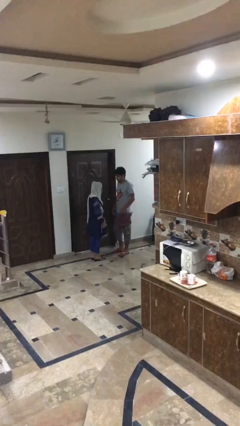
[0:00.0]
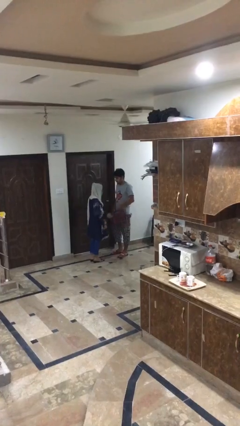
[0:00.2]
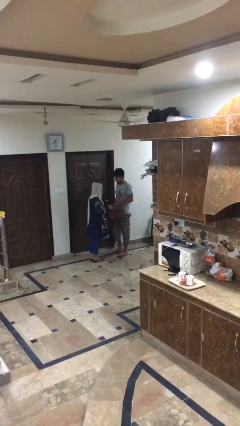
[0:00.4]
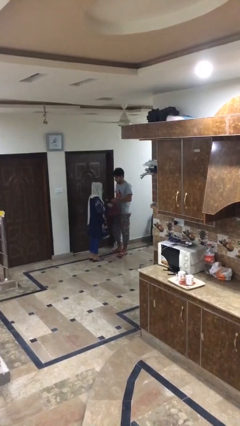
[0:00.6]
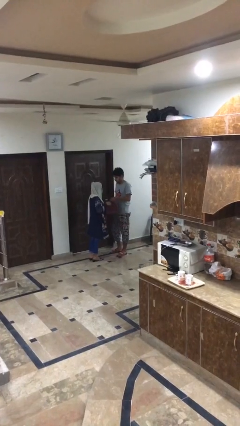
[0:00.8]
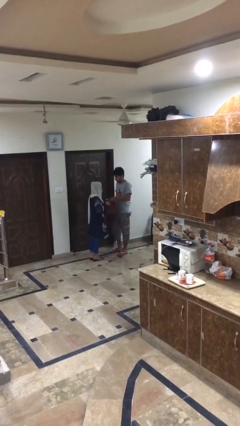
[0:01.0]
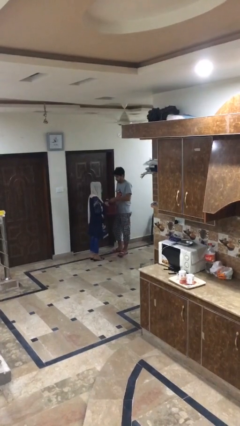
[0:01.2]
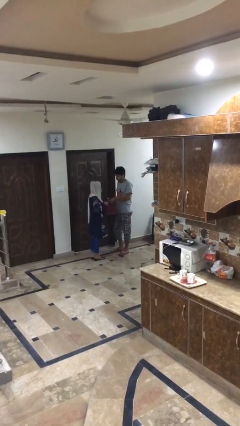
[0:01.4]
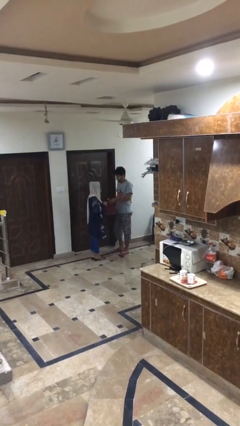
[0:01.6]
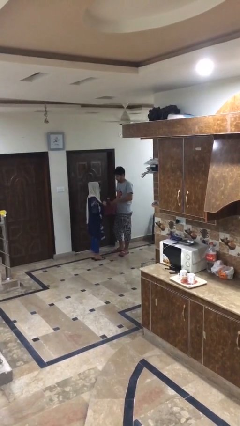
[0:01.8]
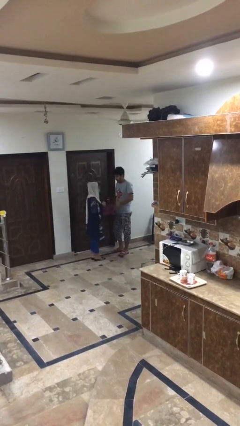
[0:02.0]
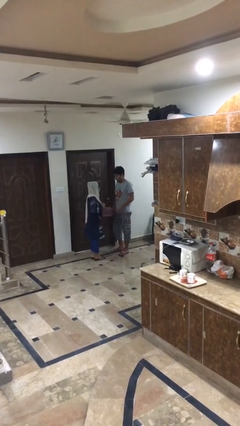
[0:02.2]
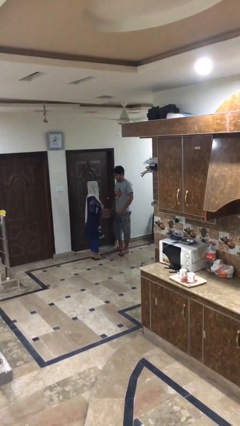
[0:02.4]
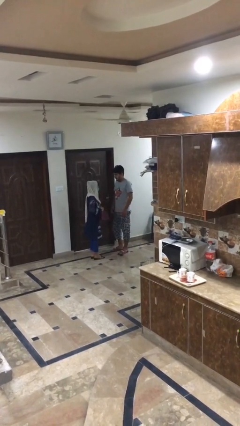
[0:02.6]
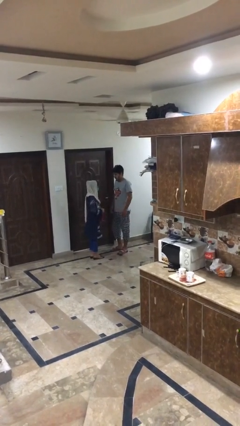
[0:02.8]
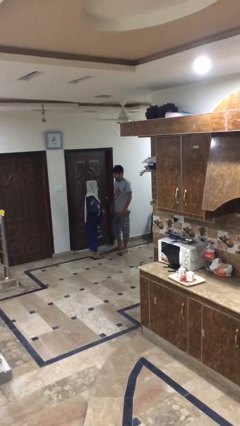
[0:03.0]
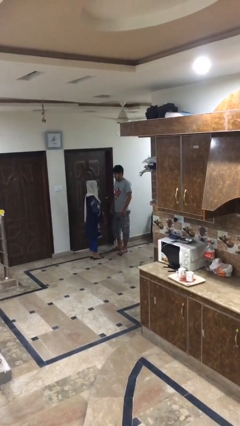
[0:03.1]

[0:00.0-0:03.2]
person transfers object to person

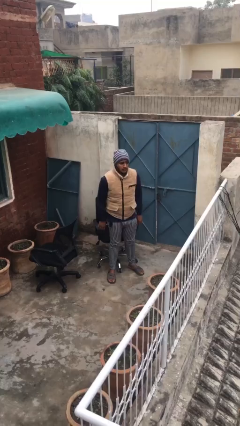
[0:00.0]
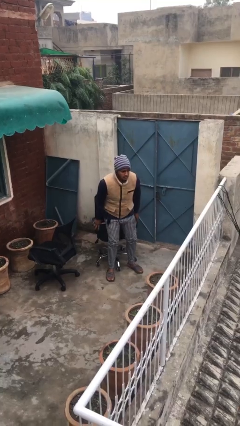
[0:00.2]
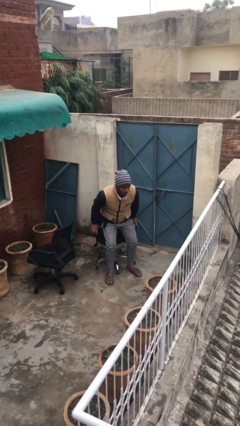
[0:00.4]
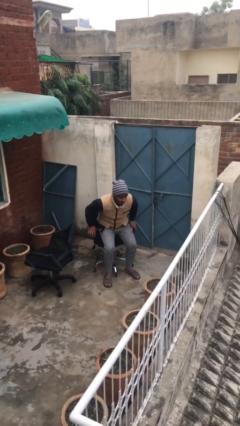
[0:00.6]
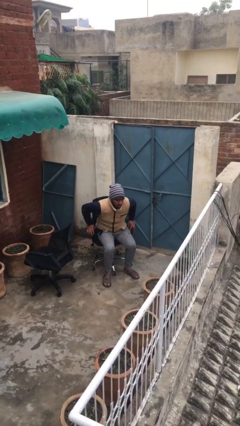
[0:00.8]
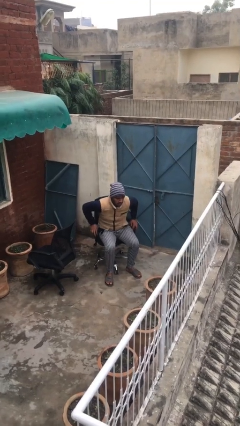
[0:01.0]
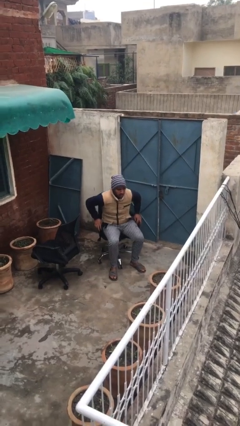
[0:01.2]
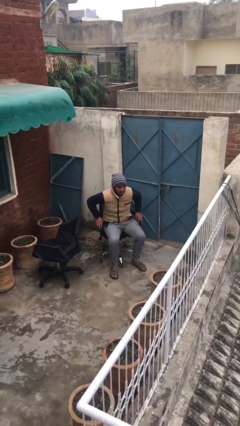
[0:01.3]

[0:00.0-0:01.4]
person sits down

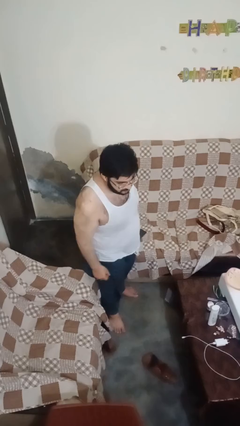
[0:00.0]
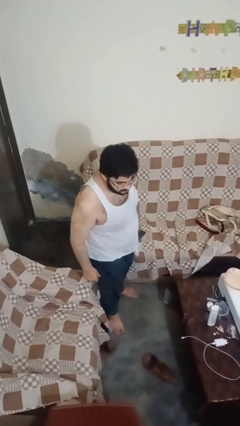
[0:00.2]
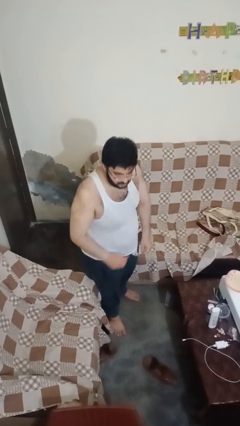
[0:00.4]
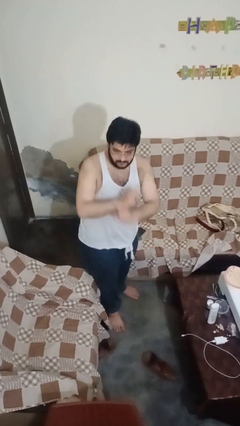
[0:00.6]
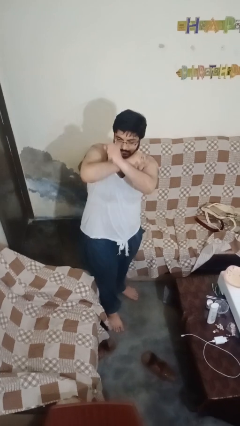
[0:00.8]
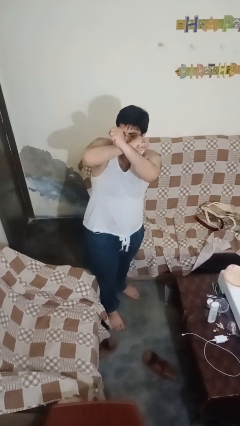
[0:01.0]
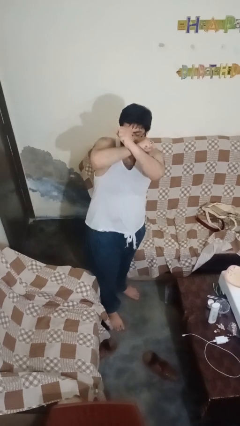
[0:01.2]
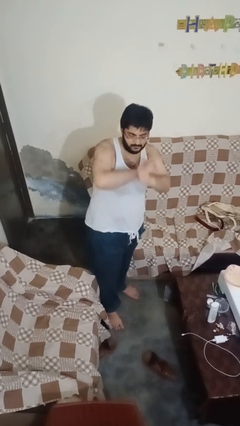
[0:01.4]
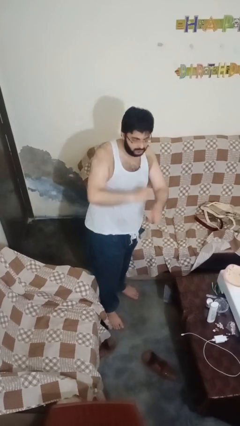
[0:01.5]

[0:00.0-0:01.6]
person karate chop

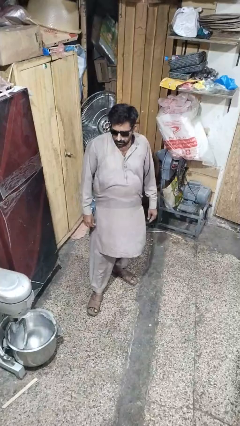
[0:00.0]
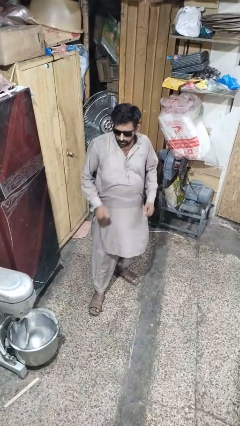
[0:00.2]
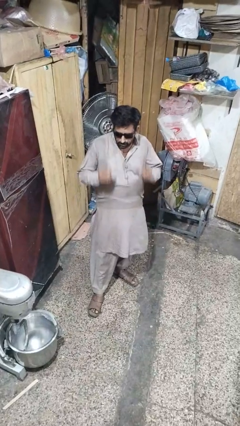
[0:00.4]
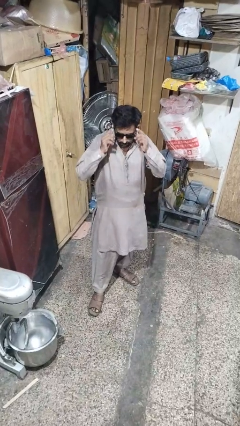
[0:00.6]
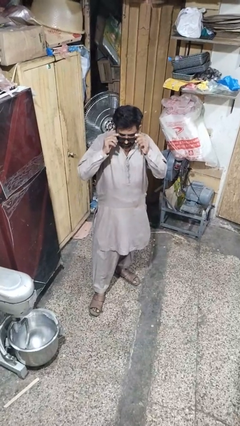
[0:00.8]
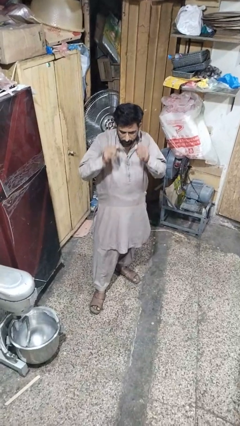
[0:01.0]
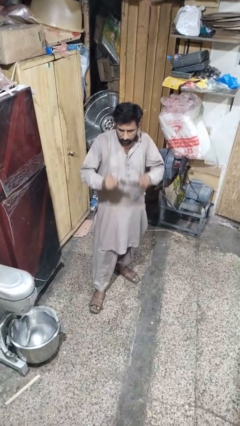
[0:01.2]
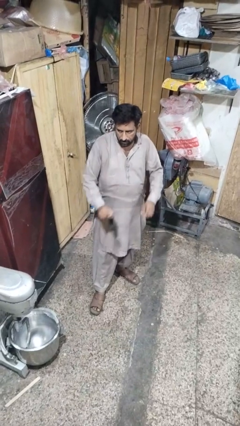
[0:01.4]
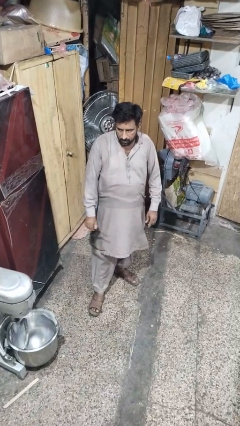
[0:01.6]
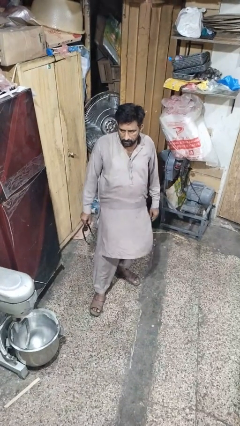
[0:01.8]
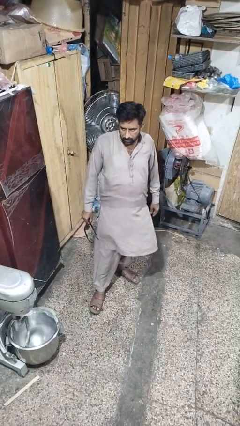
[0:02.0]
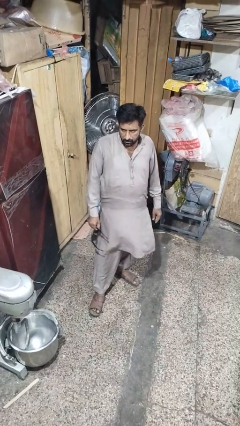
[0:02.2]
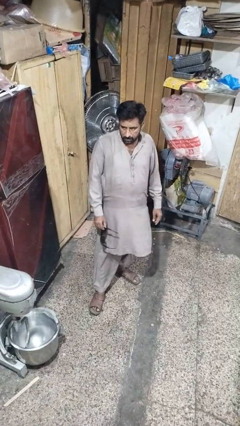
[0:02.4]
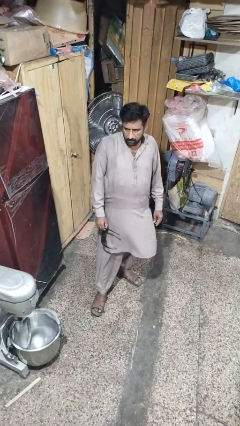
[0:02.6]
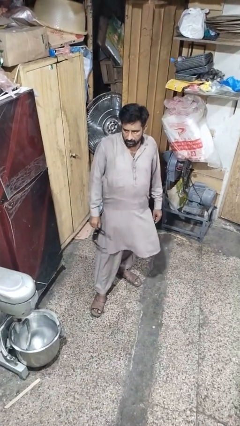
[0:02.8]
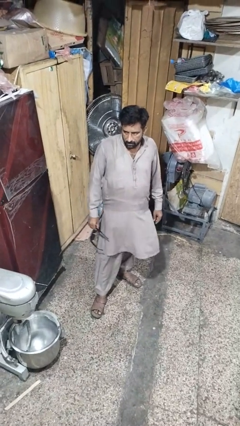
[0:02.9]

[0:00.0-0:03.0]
person takes off sunglasses

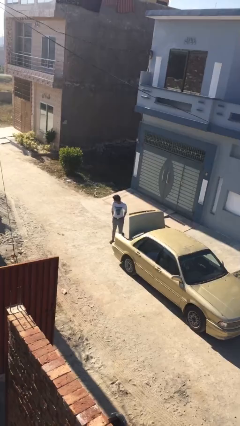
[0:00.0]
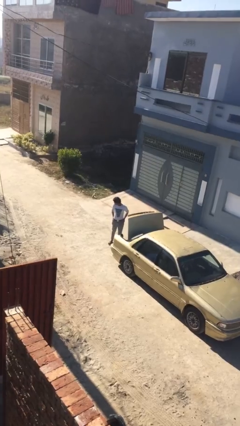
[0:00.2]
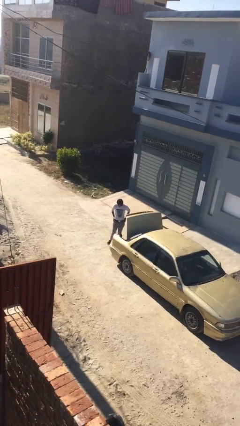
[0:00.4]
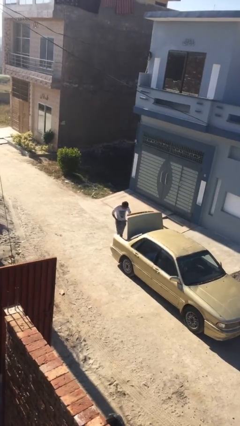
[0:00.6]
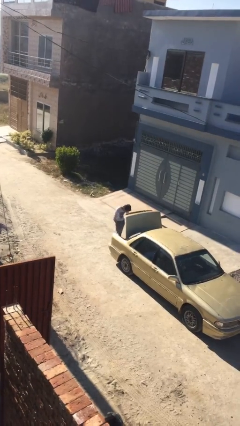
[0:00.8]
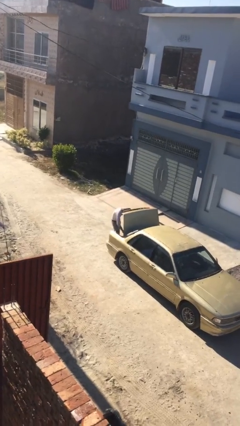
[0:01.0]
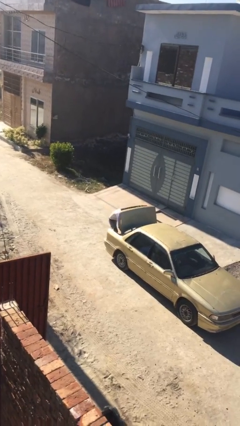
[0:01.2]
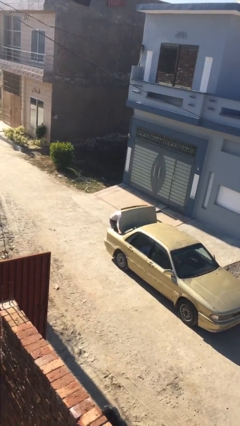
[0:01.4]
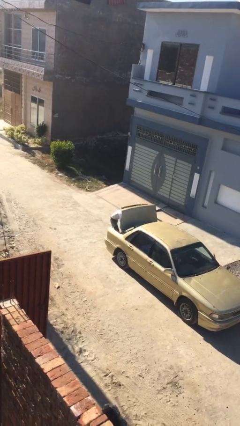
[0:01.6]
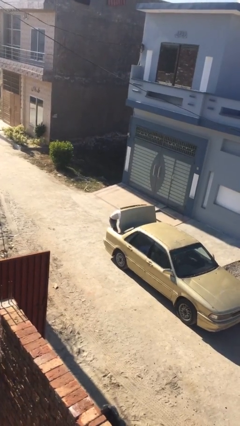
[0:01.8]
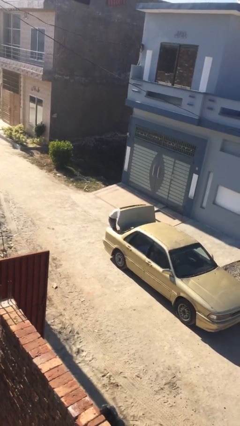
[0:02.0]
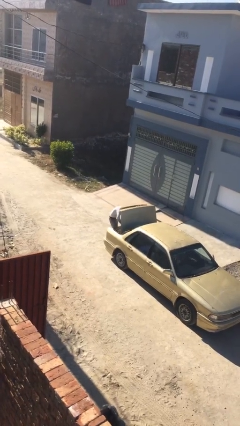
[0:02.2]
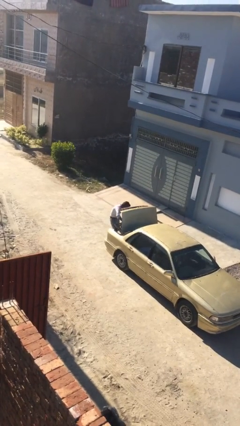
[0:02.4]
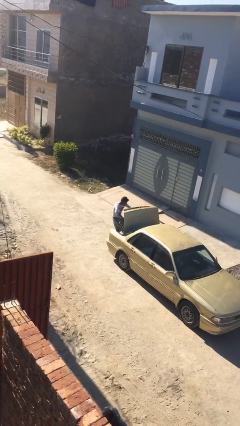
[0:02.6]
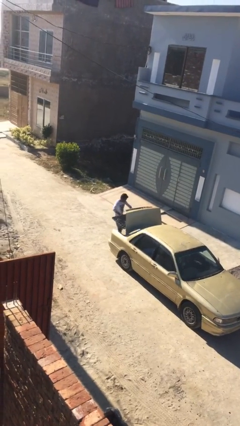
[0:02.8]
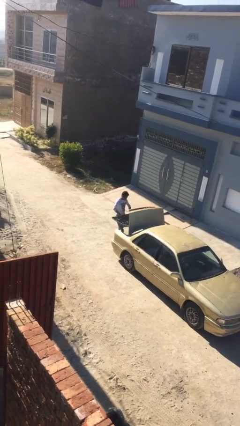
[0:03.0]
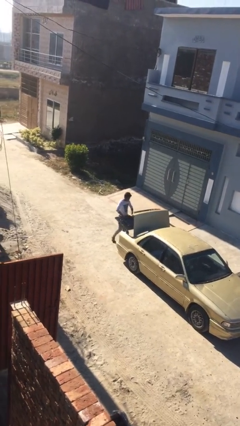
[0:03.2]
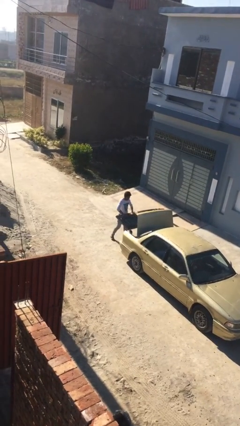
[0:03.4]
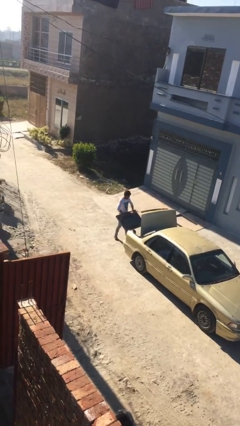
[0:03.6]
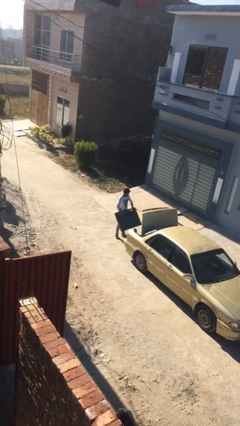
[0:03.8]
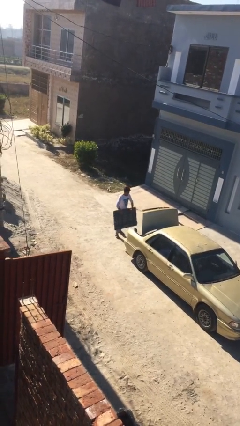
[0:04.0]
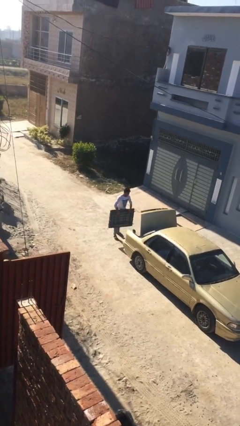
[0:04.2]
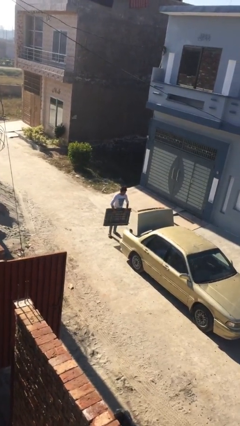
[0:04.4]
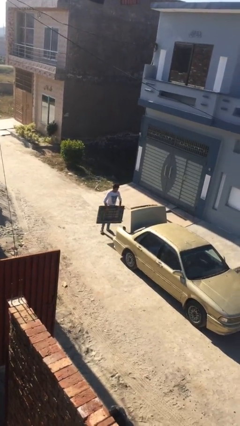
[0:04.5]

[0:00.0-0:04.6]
person unloads car

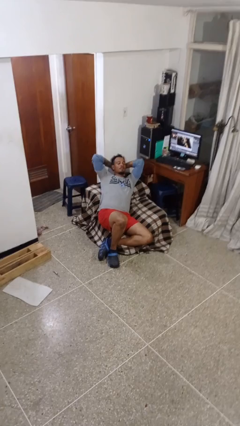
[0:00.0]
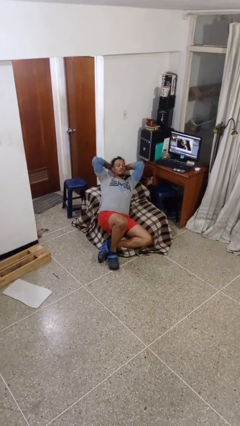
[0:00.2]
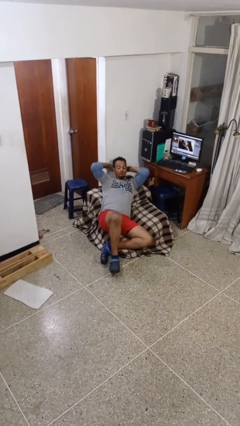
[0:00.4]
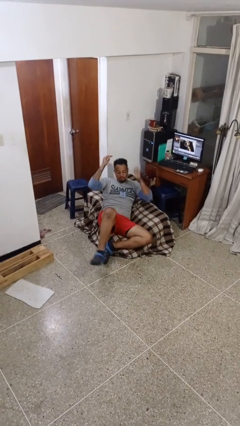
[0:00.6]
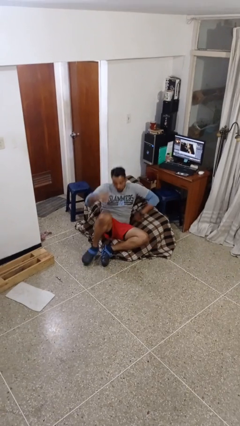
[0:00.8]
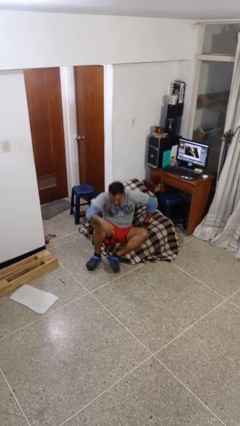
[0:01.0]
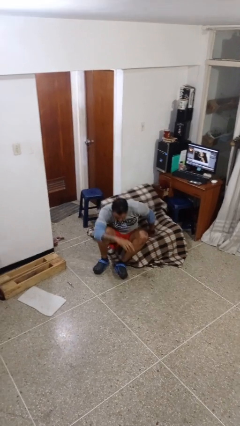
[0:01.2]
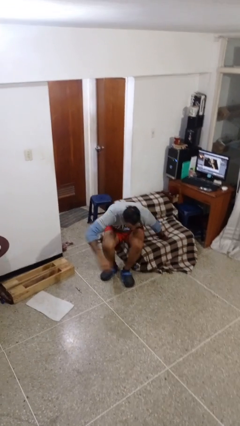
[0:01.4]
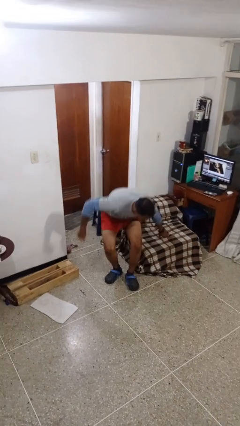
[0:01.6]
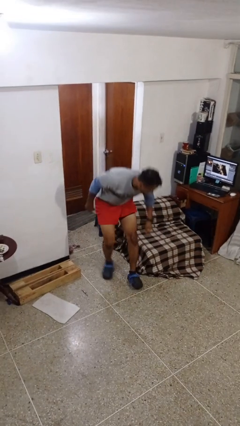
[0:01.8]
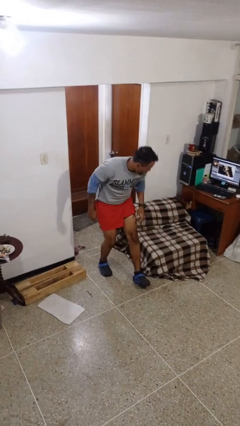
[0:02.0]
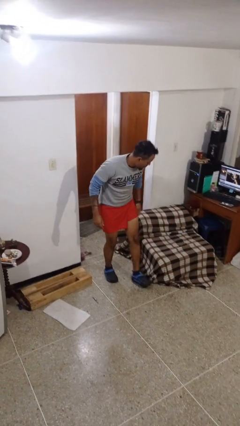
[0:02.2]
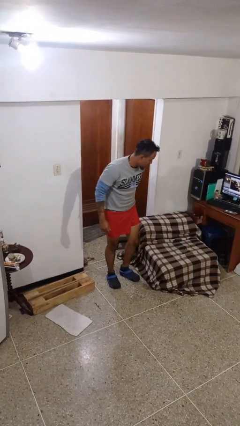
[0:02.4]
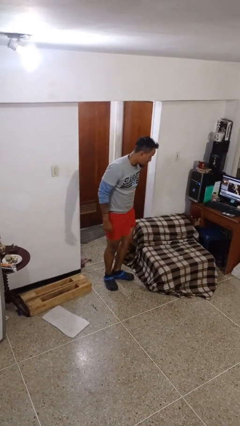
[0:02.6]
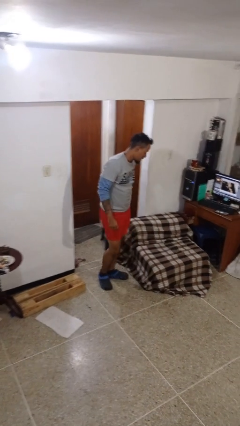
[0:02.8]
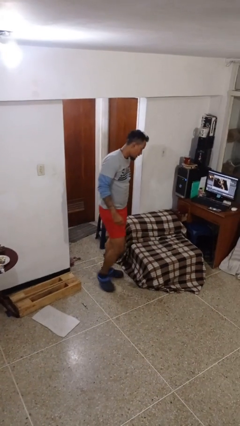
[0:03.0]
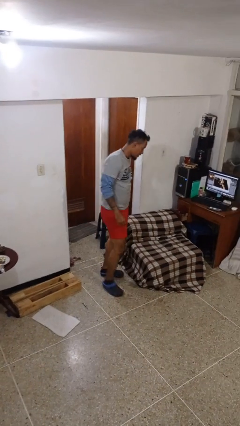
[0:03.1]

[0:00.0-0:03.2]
person stands up

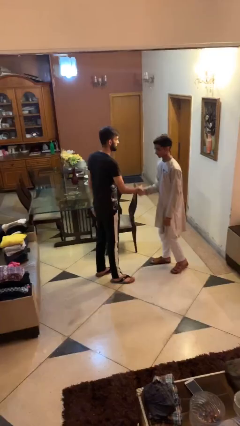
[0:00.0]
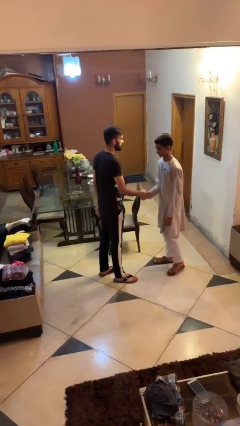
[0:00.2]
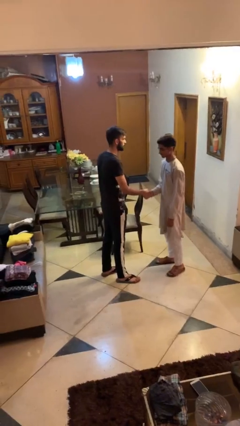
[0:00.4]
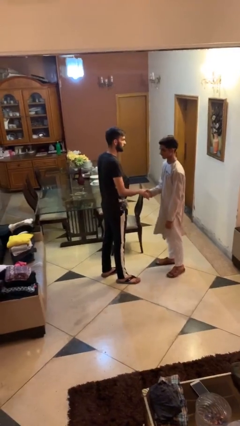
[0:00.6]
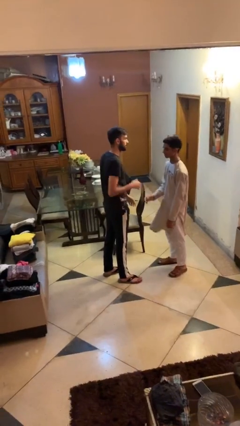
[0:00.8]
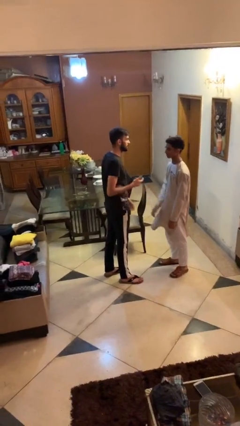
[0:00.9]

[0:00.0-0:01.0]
person shakes hand
